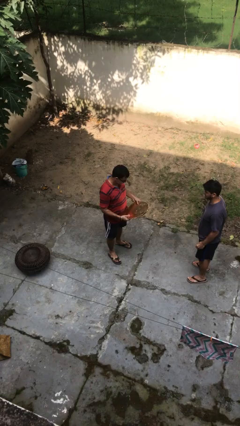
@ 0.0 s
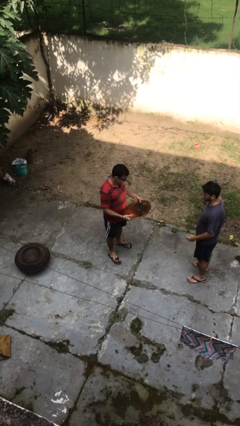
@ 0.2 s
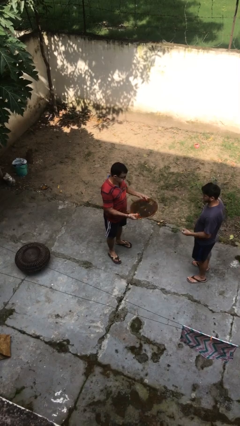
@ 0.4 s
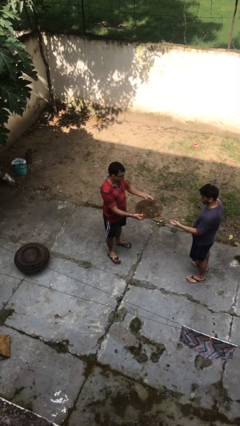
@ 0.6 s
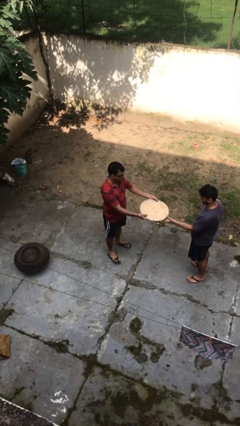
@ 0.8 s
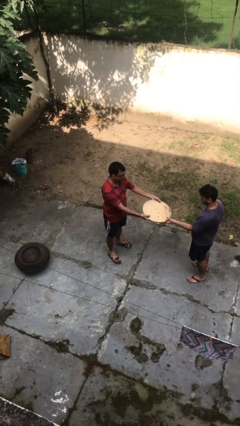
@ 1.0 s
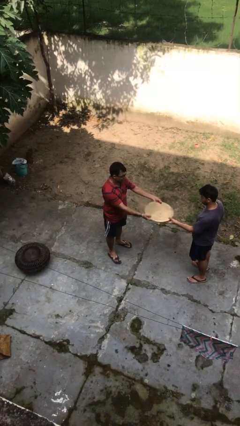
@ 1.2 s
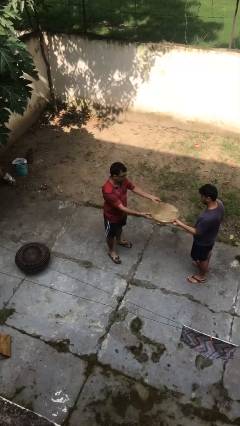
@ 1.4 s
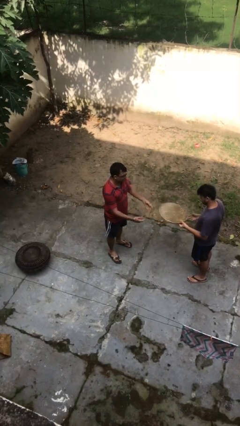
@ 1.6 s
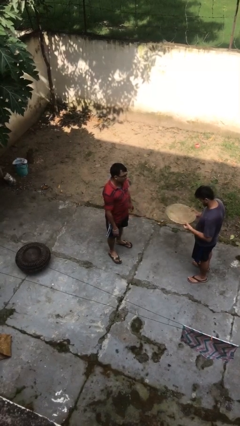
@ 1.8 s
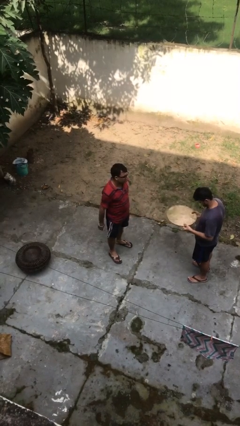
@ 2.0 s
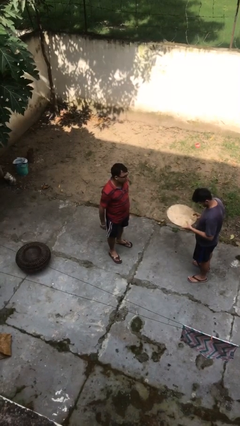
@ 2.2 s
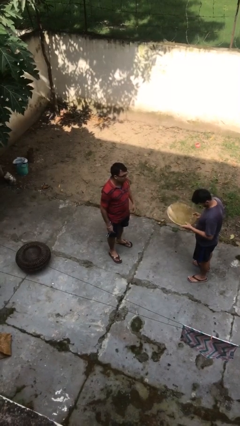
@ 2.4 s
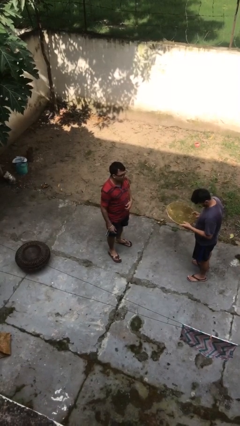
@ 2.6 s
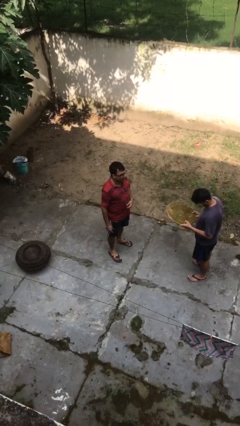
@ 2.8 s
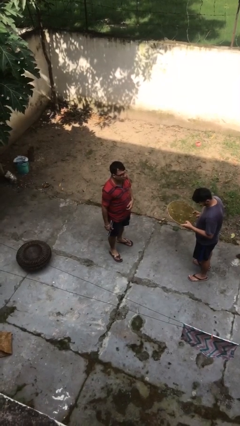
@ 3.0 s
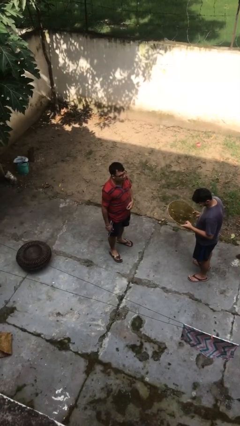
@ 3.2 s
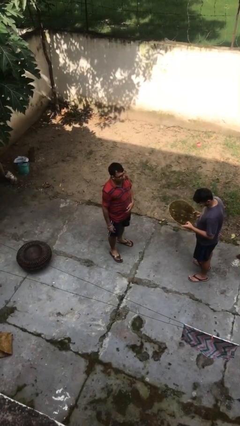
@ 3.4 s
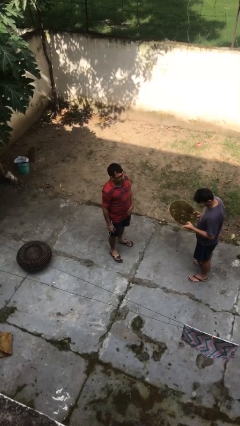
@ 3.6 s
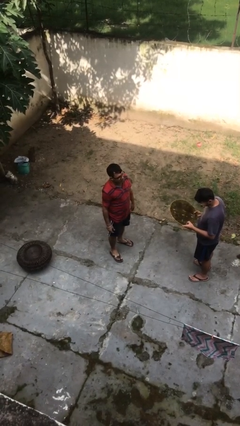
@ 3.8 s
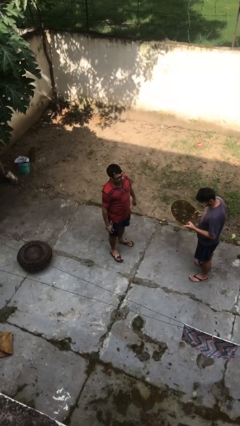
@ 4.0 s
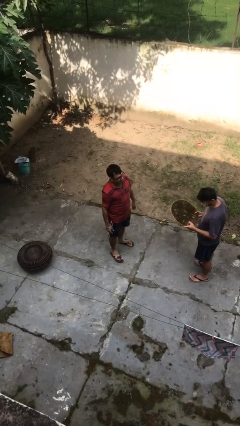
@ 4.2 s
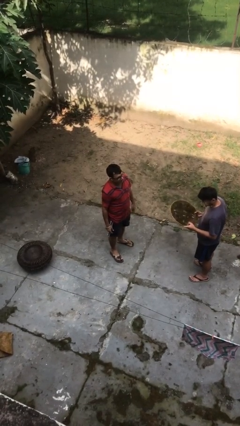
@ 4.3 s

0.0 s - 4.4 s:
person transfers object to person

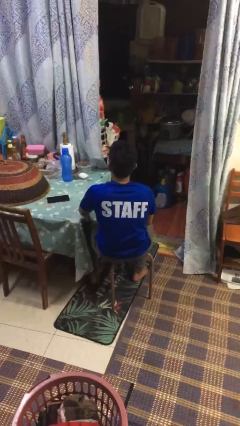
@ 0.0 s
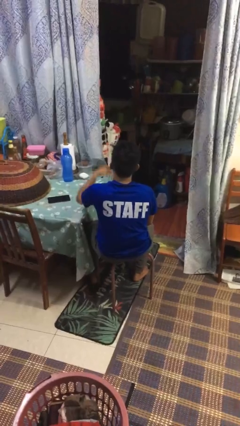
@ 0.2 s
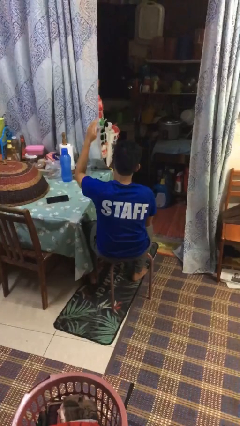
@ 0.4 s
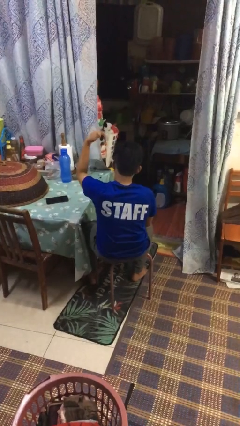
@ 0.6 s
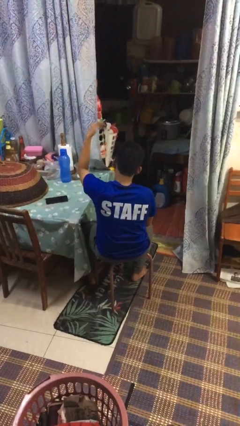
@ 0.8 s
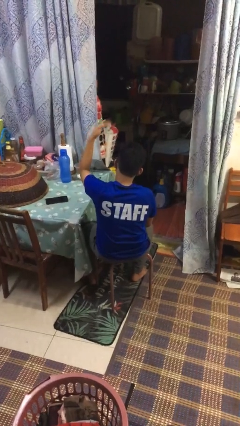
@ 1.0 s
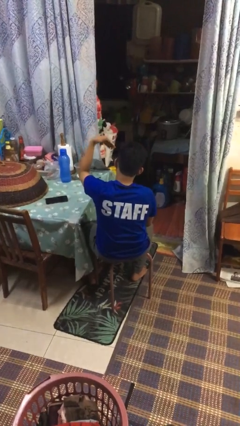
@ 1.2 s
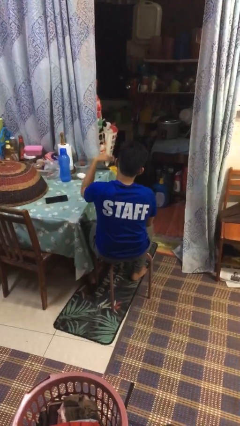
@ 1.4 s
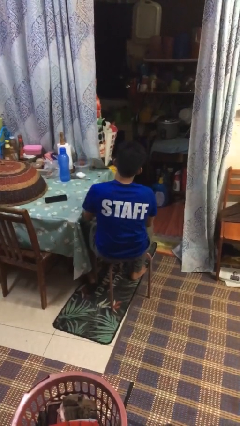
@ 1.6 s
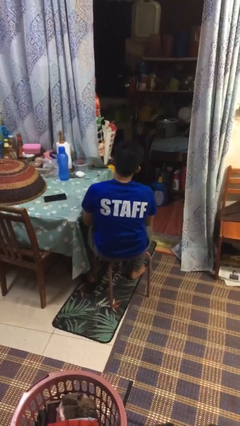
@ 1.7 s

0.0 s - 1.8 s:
person gestures come here

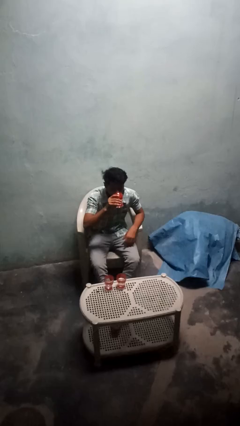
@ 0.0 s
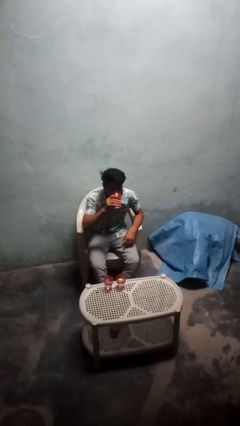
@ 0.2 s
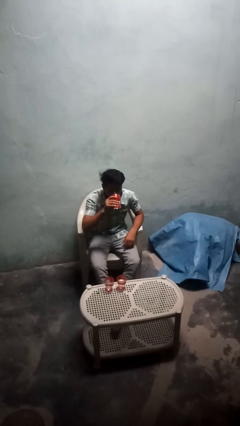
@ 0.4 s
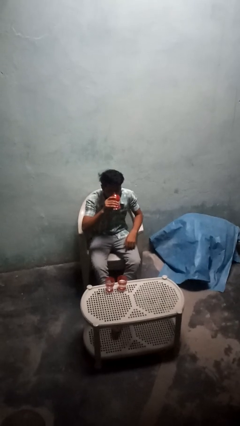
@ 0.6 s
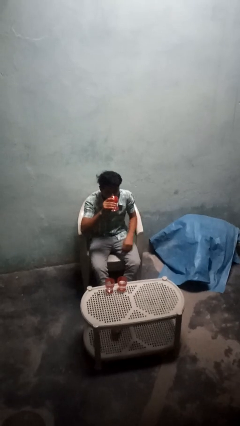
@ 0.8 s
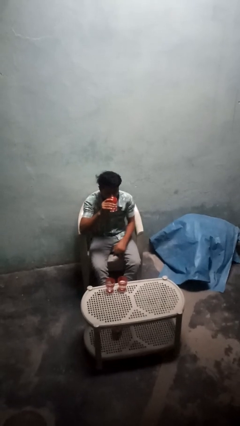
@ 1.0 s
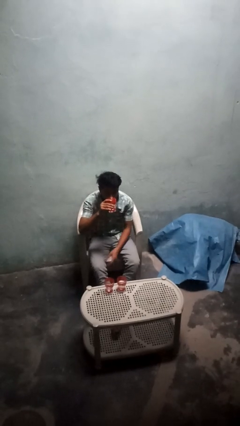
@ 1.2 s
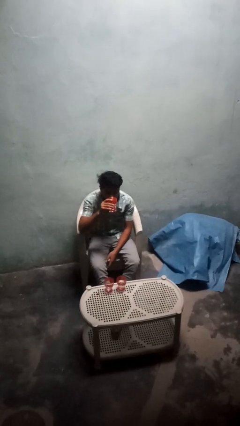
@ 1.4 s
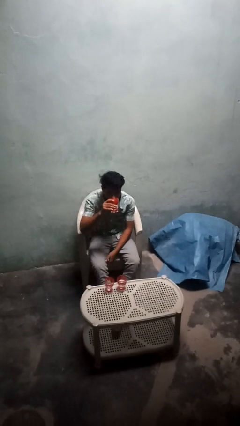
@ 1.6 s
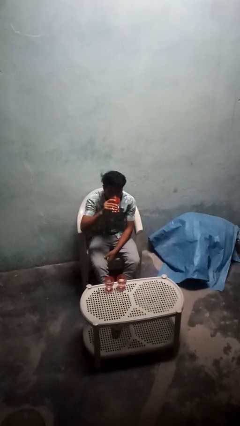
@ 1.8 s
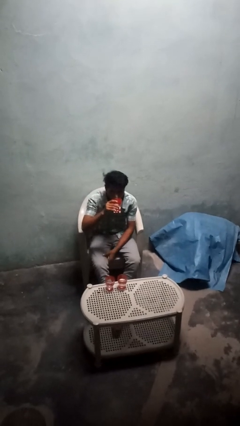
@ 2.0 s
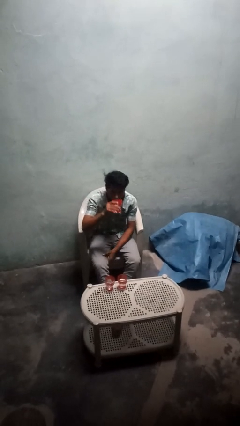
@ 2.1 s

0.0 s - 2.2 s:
person drinks from shotglass

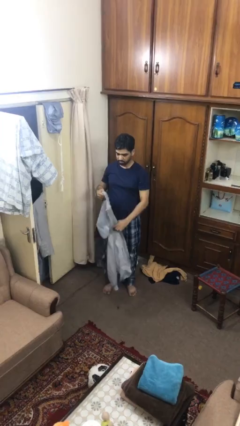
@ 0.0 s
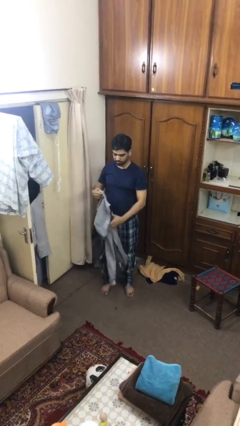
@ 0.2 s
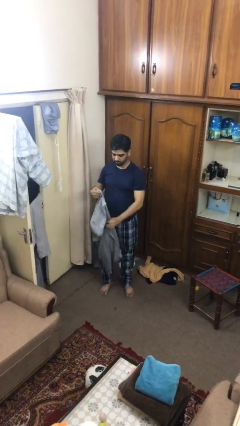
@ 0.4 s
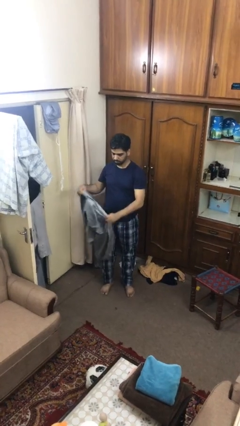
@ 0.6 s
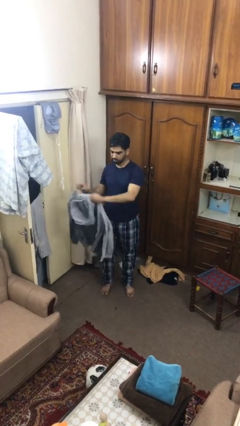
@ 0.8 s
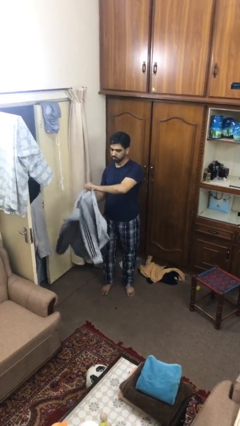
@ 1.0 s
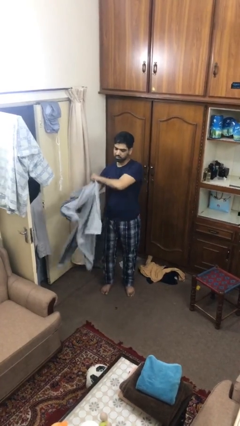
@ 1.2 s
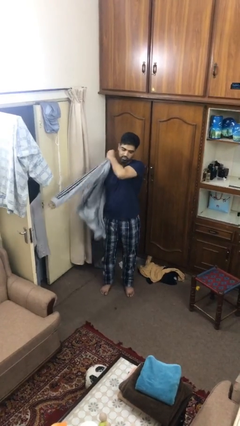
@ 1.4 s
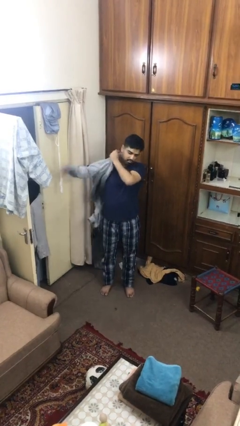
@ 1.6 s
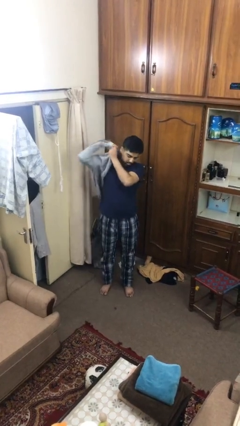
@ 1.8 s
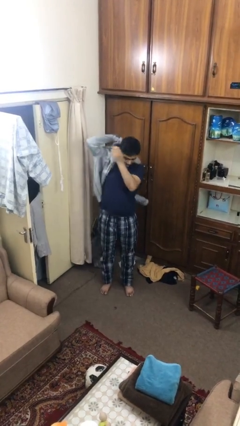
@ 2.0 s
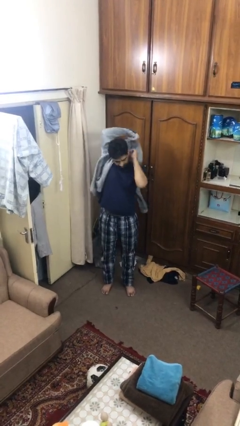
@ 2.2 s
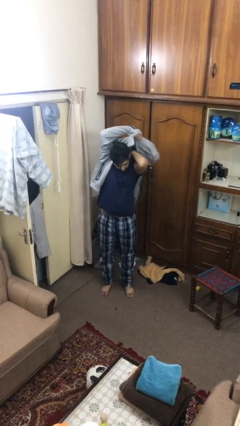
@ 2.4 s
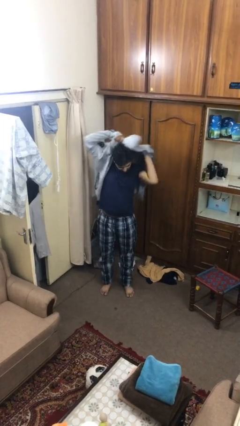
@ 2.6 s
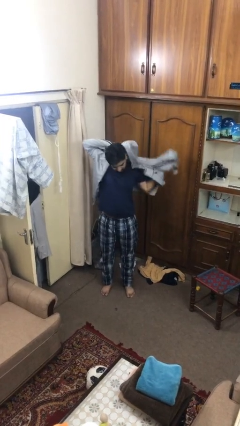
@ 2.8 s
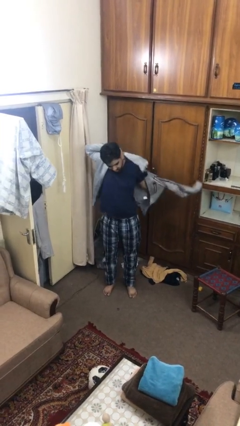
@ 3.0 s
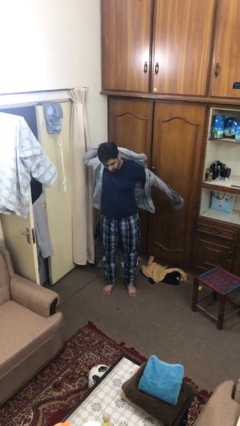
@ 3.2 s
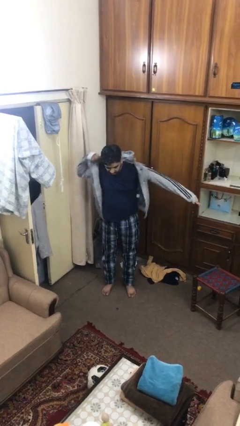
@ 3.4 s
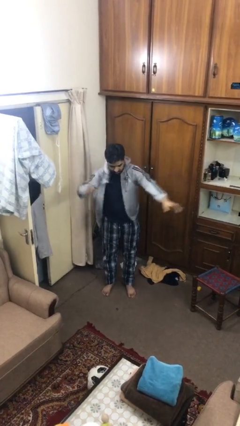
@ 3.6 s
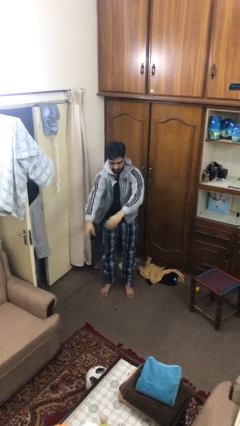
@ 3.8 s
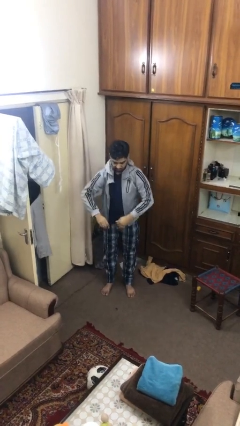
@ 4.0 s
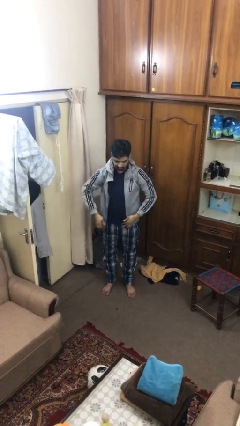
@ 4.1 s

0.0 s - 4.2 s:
person puts on jacket

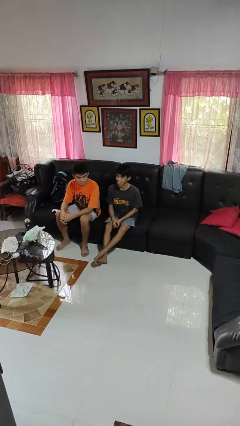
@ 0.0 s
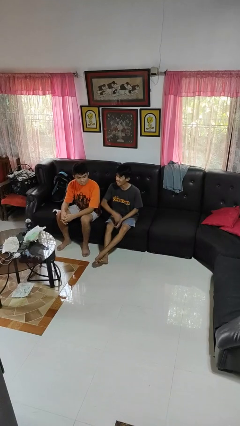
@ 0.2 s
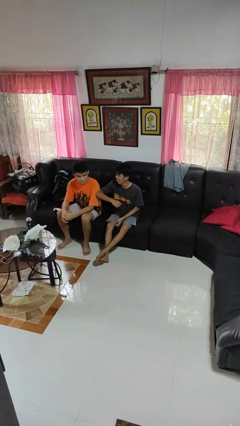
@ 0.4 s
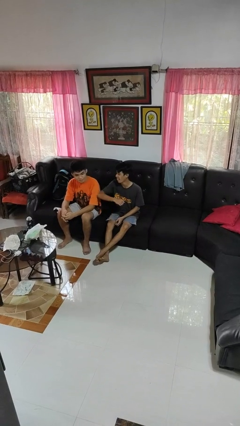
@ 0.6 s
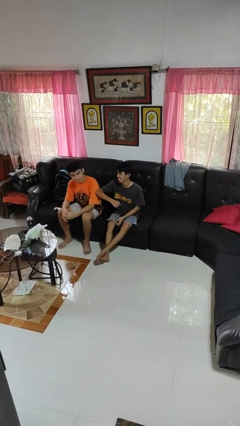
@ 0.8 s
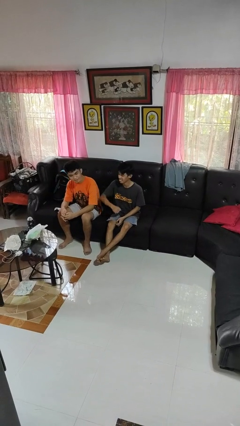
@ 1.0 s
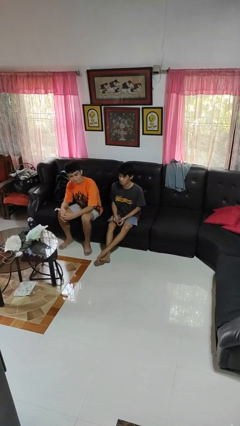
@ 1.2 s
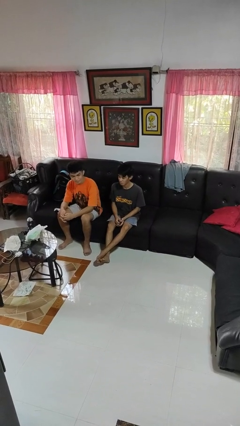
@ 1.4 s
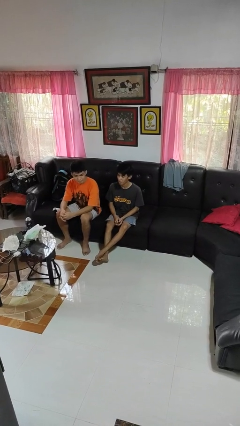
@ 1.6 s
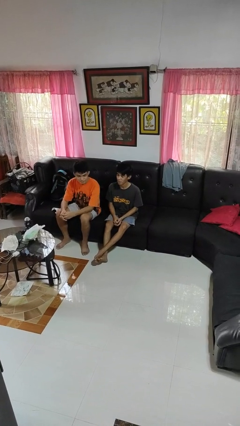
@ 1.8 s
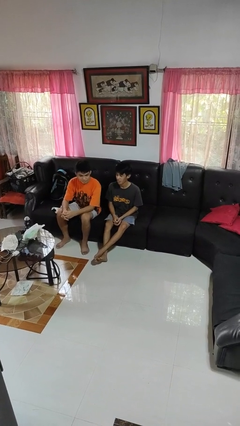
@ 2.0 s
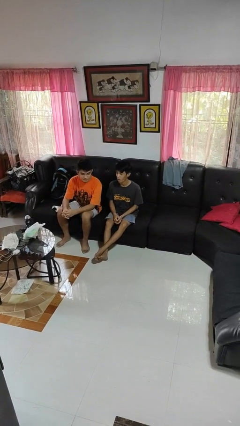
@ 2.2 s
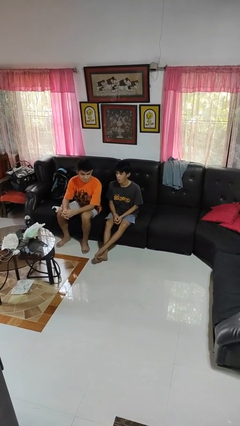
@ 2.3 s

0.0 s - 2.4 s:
person nudges person with elbow

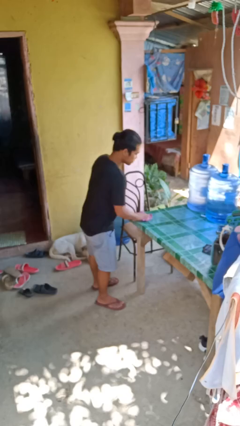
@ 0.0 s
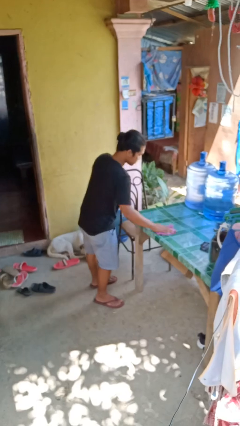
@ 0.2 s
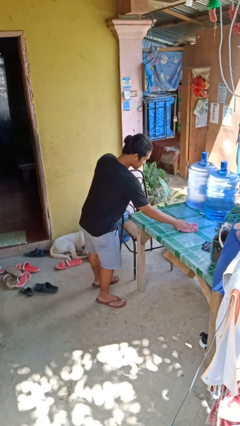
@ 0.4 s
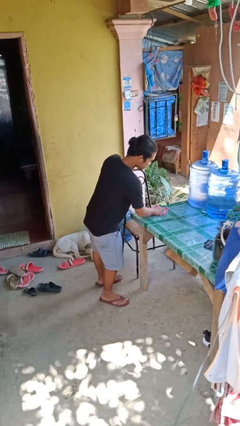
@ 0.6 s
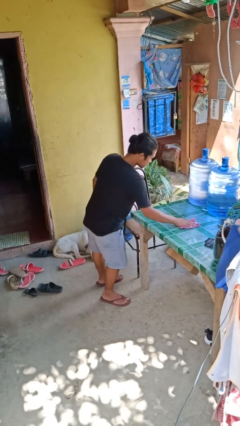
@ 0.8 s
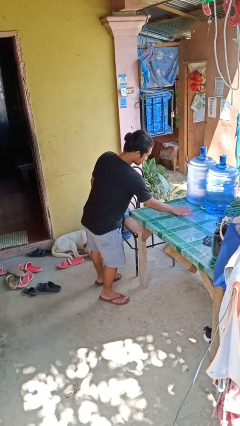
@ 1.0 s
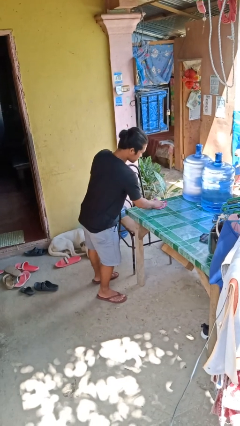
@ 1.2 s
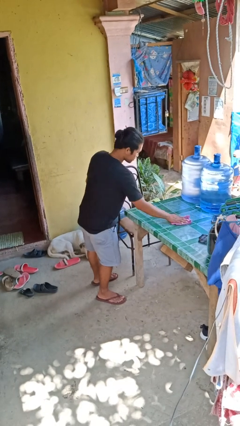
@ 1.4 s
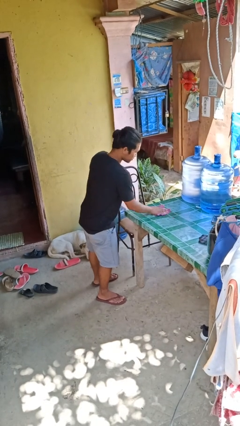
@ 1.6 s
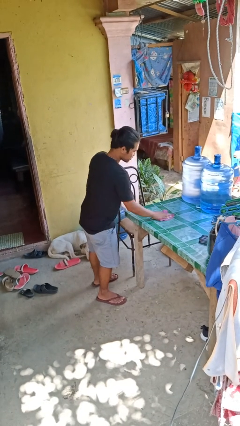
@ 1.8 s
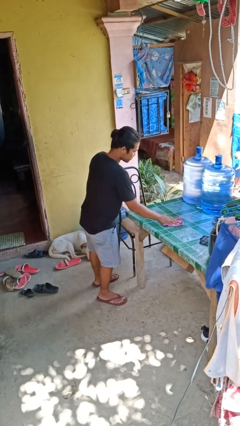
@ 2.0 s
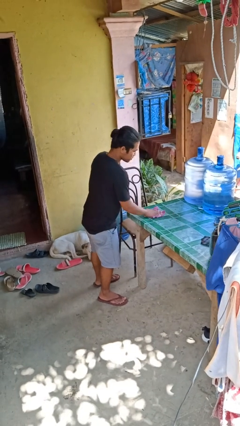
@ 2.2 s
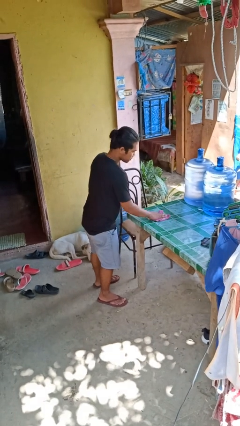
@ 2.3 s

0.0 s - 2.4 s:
person cleans table with rag
